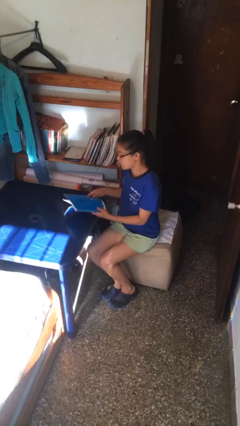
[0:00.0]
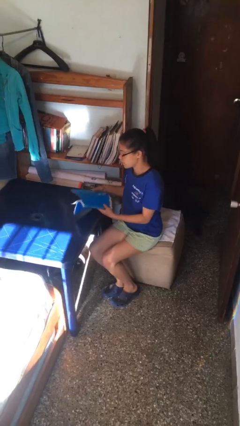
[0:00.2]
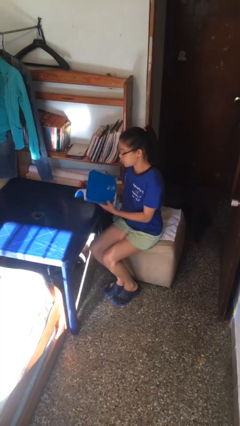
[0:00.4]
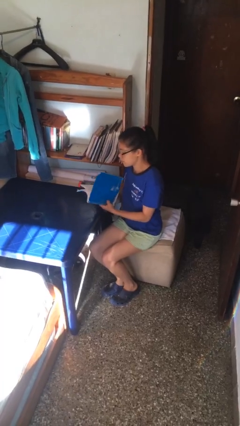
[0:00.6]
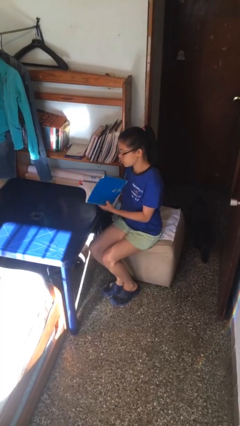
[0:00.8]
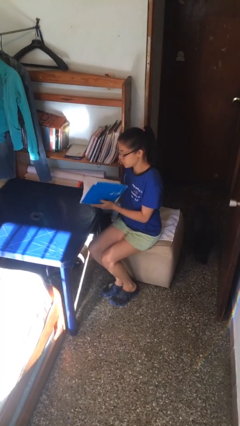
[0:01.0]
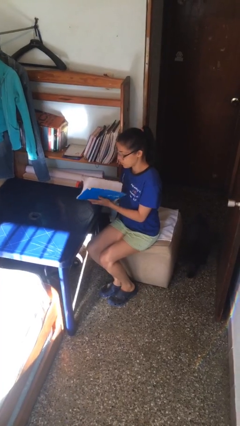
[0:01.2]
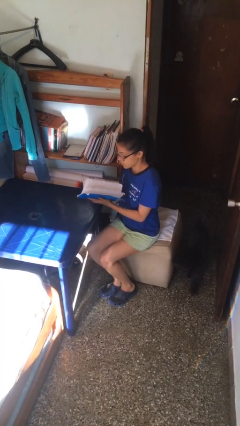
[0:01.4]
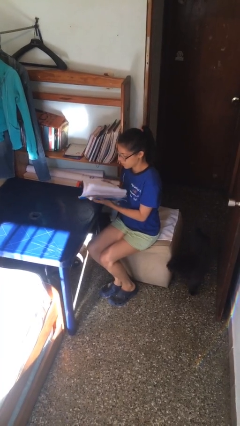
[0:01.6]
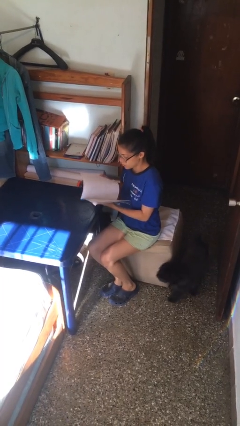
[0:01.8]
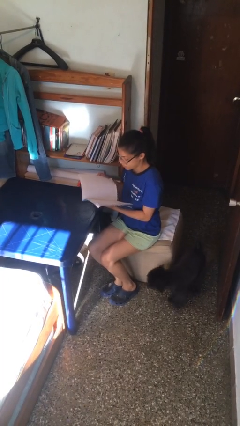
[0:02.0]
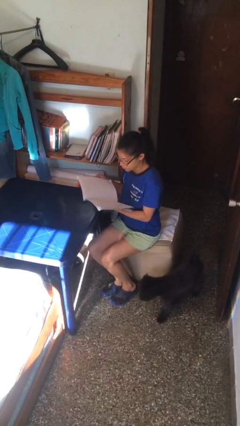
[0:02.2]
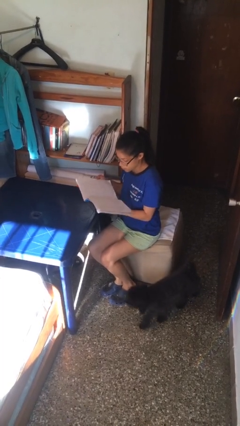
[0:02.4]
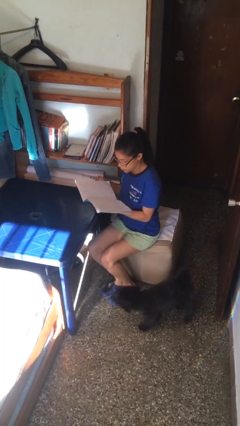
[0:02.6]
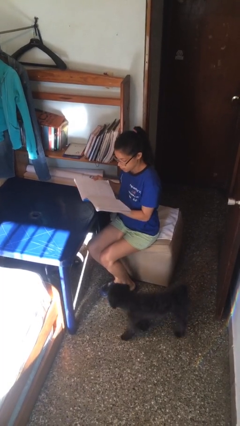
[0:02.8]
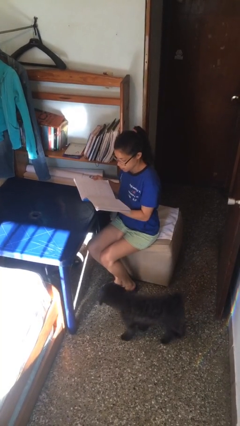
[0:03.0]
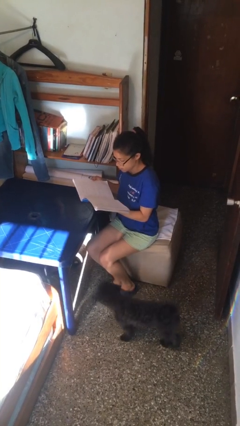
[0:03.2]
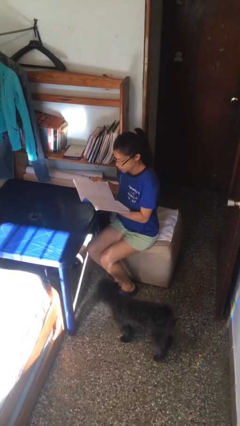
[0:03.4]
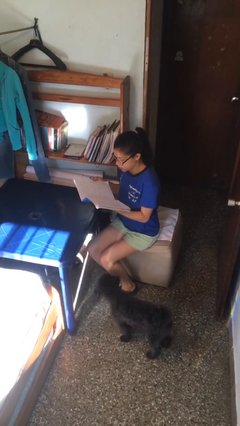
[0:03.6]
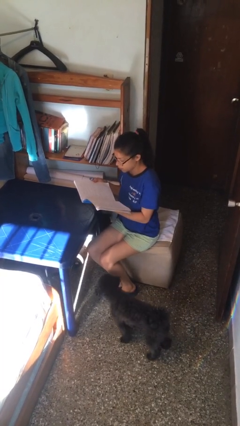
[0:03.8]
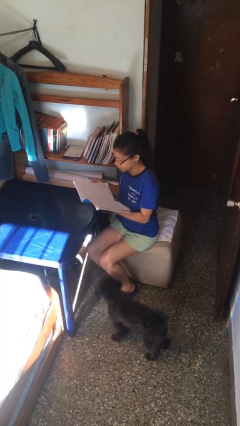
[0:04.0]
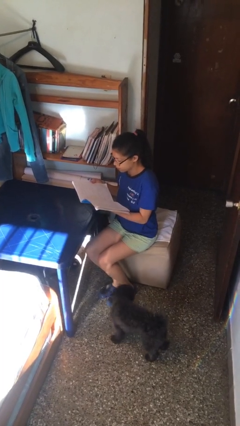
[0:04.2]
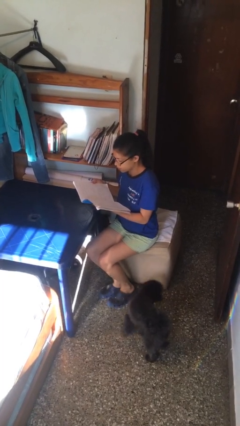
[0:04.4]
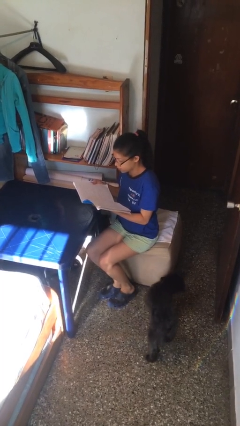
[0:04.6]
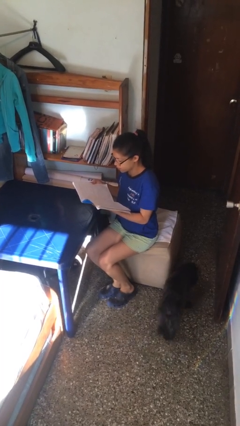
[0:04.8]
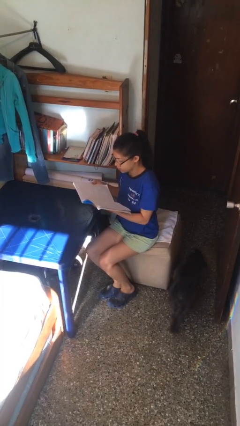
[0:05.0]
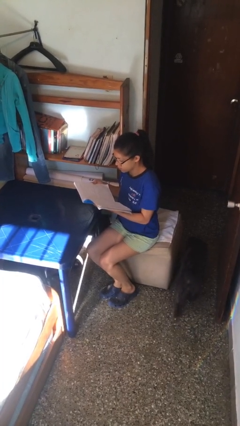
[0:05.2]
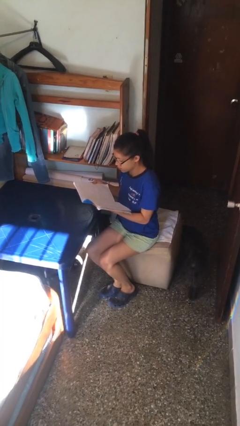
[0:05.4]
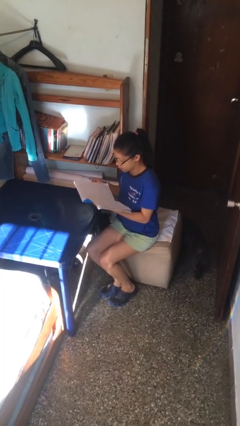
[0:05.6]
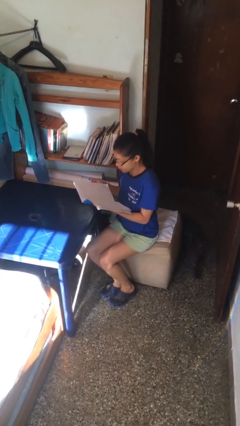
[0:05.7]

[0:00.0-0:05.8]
person reads document

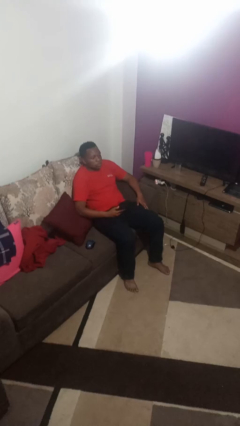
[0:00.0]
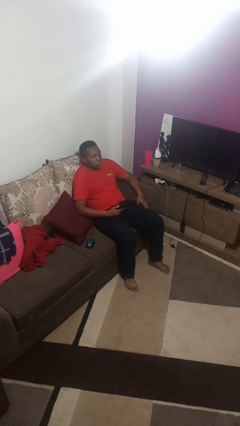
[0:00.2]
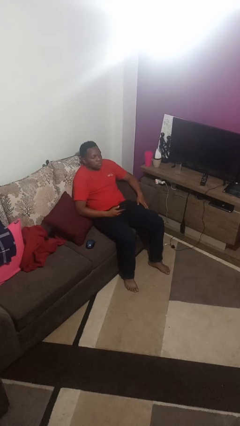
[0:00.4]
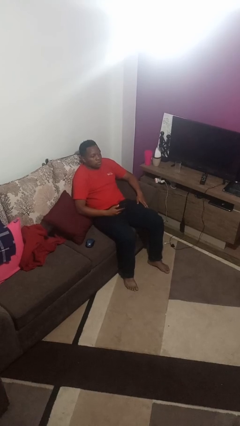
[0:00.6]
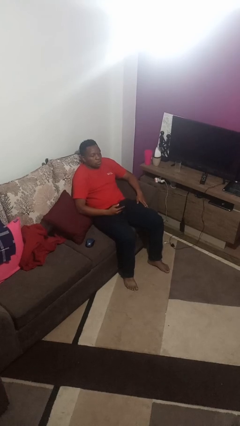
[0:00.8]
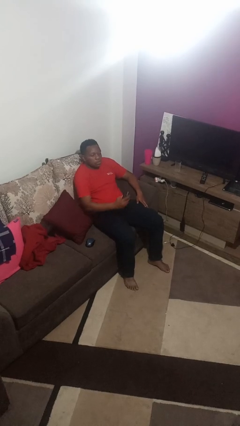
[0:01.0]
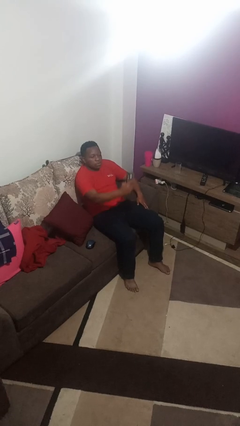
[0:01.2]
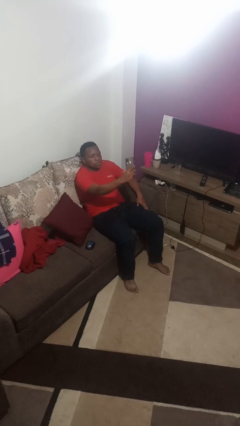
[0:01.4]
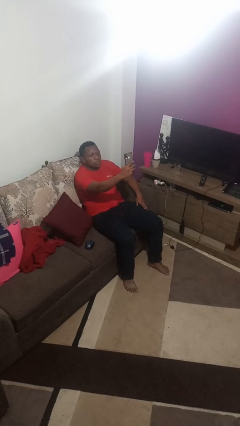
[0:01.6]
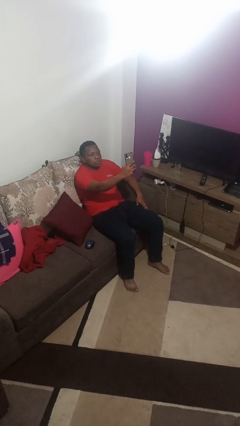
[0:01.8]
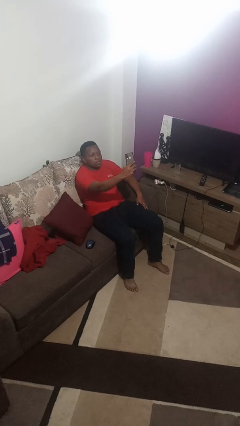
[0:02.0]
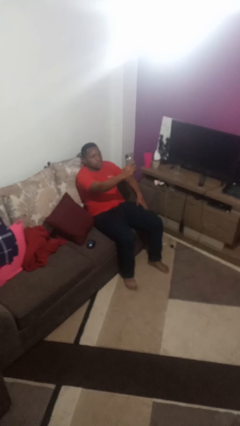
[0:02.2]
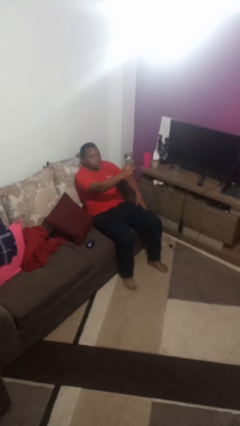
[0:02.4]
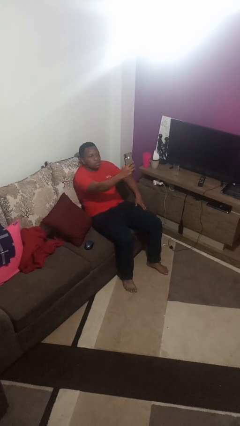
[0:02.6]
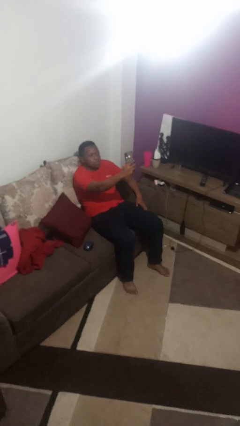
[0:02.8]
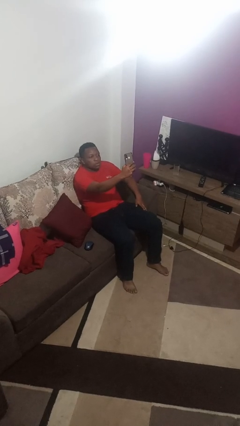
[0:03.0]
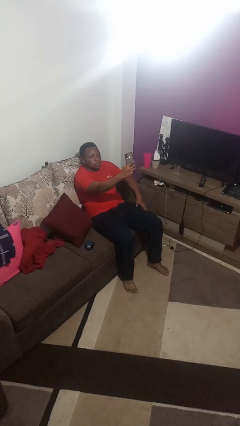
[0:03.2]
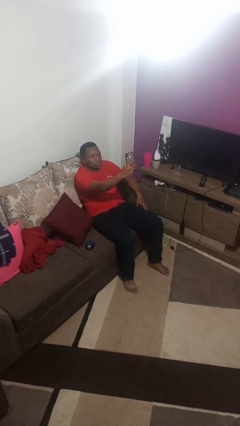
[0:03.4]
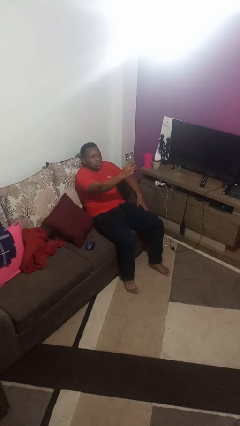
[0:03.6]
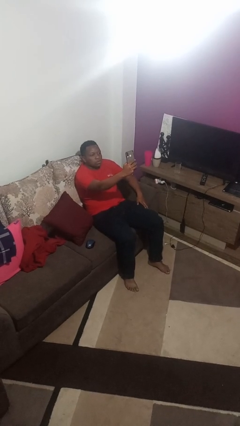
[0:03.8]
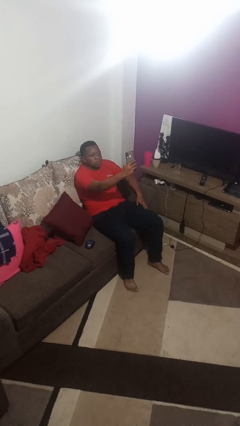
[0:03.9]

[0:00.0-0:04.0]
person takes selfie

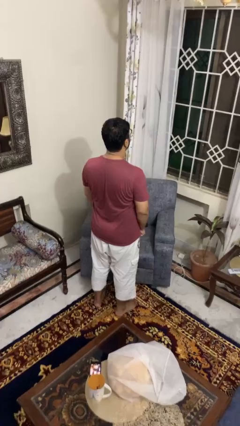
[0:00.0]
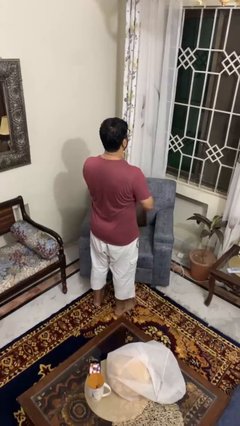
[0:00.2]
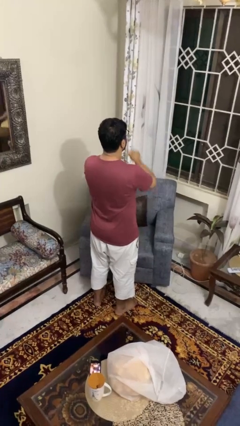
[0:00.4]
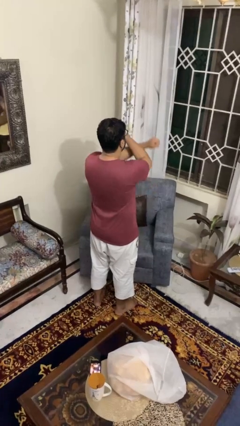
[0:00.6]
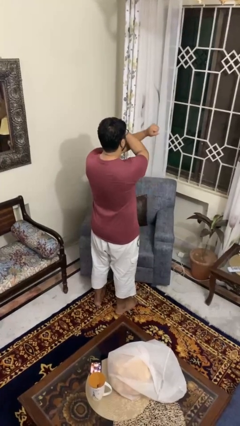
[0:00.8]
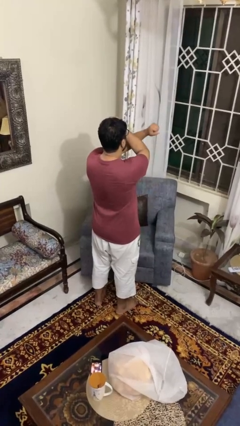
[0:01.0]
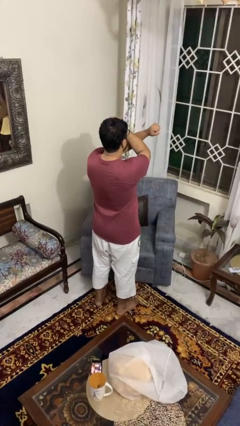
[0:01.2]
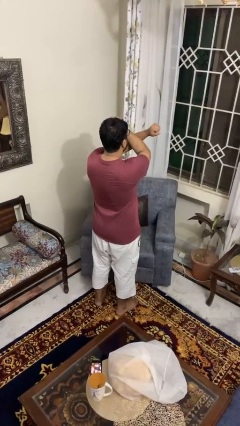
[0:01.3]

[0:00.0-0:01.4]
person gestures arms x

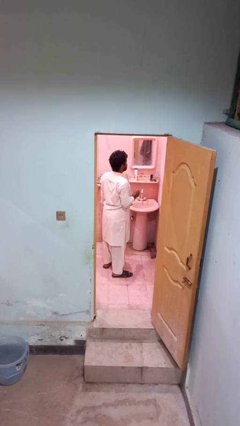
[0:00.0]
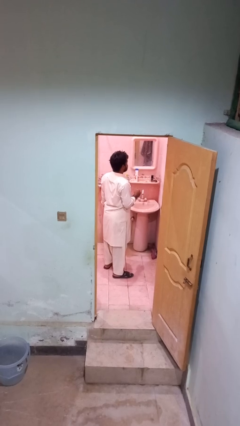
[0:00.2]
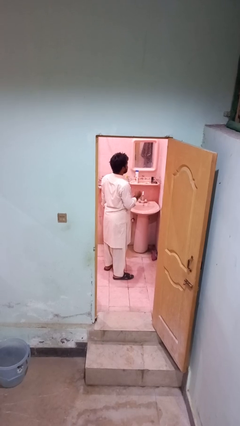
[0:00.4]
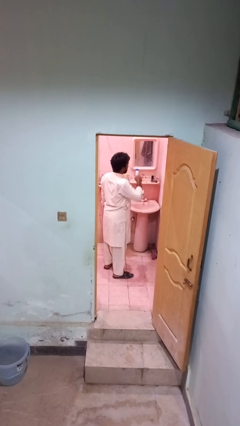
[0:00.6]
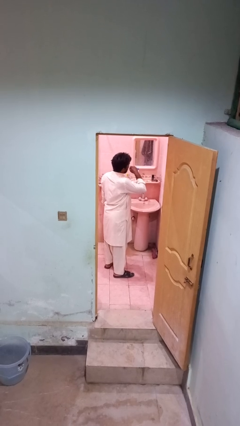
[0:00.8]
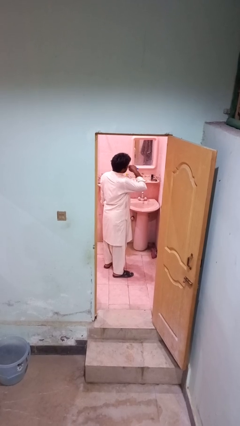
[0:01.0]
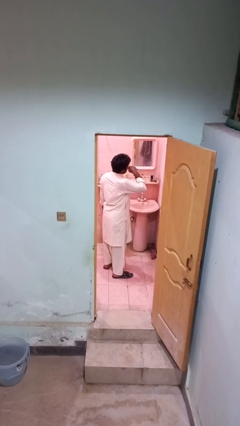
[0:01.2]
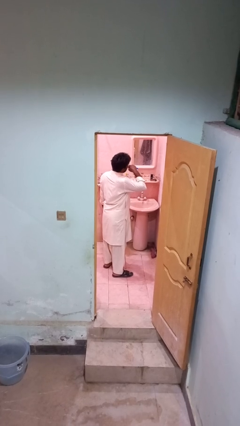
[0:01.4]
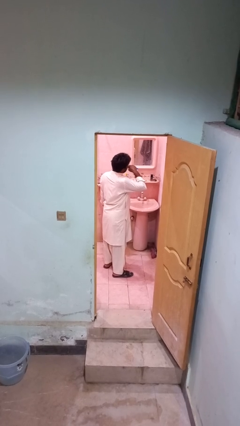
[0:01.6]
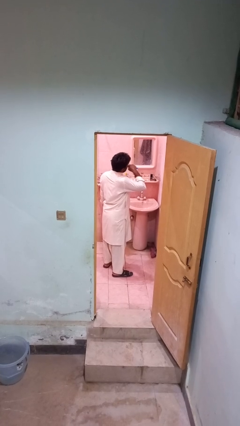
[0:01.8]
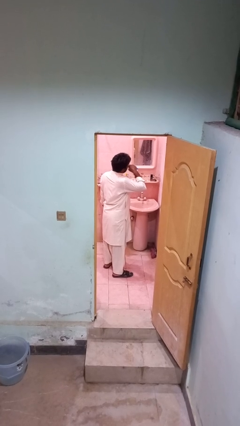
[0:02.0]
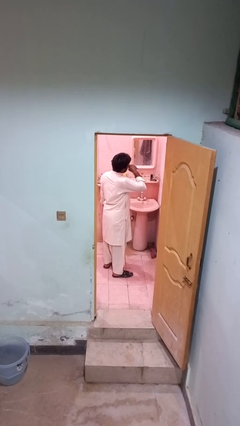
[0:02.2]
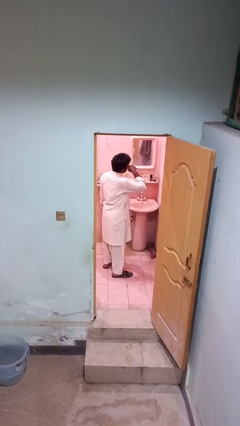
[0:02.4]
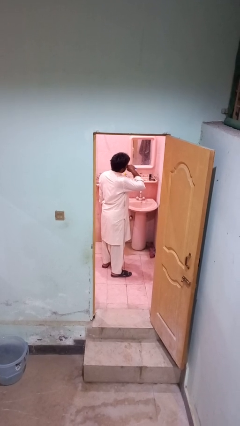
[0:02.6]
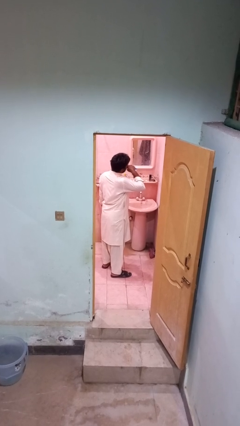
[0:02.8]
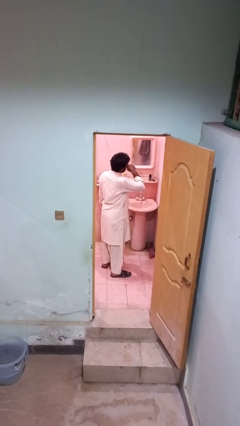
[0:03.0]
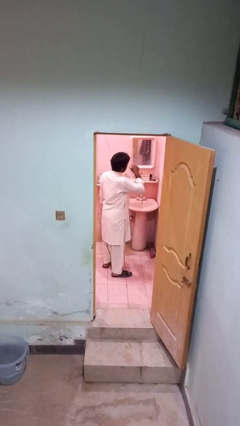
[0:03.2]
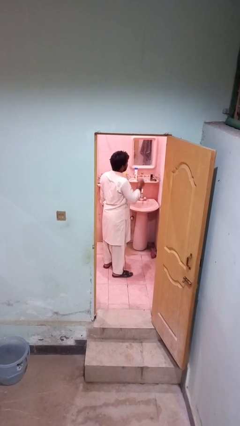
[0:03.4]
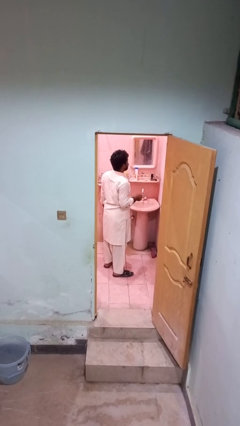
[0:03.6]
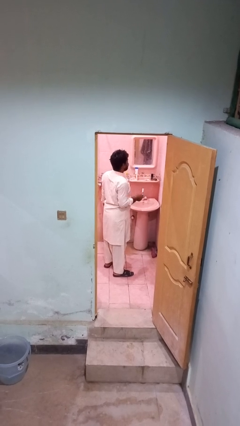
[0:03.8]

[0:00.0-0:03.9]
person flosses

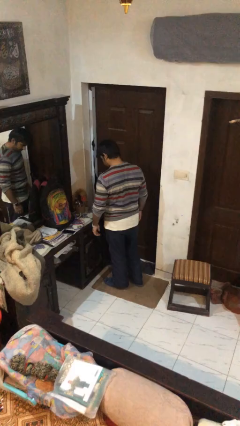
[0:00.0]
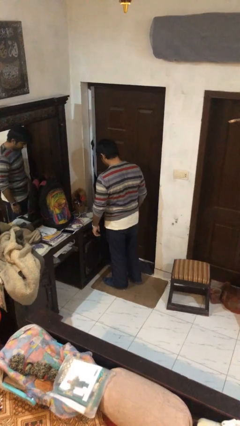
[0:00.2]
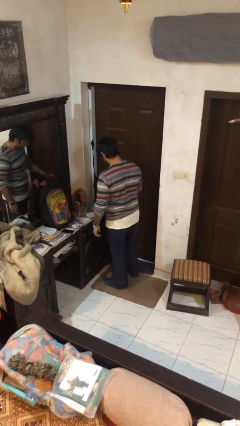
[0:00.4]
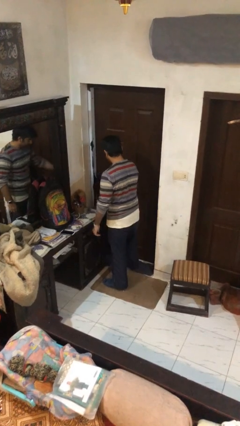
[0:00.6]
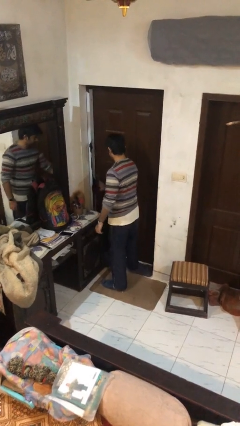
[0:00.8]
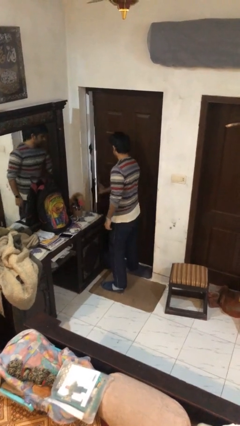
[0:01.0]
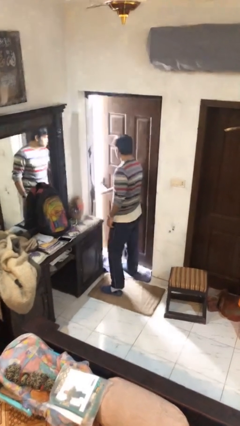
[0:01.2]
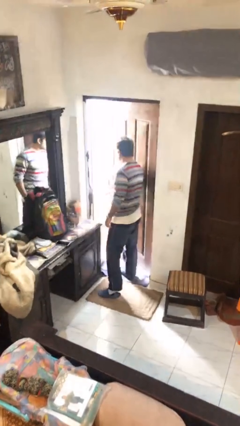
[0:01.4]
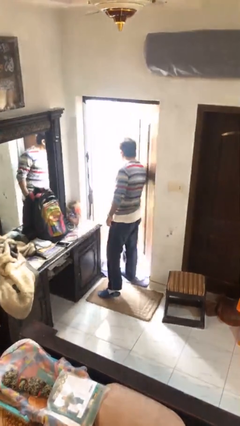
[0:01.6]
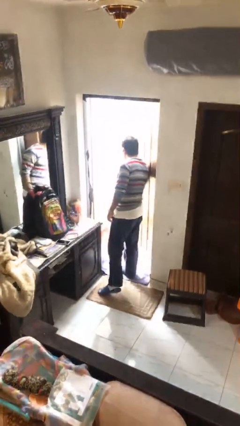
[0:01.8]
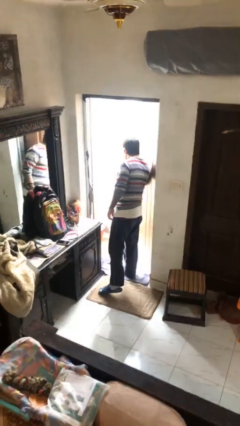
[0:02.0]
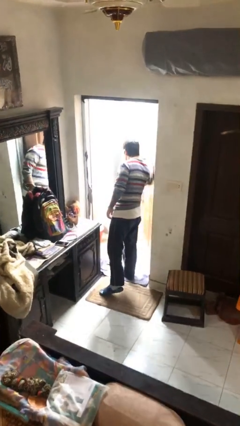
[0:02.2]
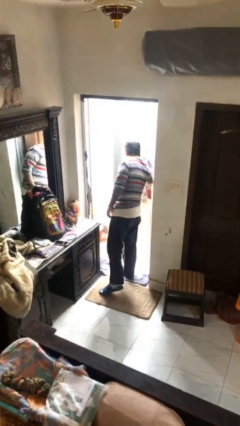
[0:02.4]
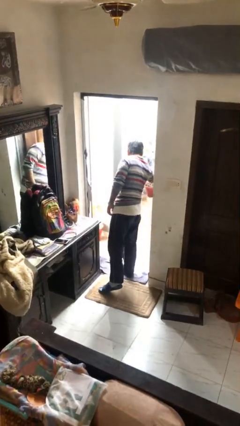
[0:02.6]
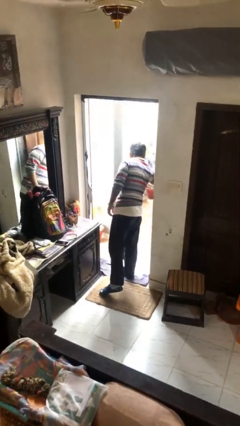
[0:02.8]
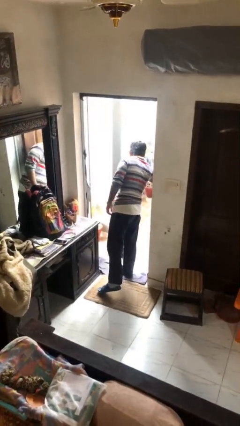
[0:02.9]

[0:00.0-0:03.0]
person opens facility door
